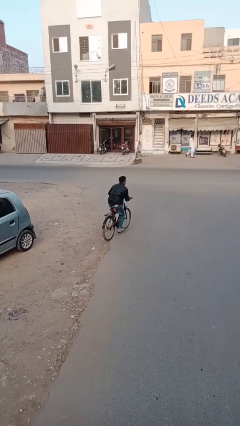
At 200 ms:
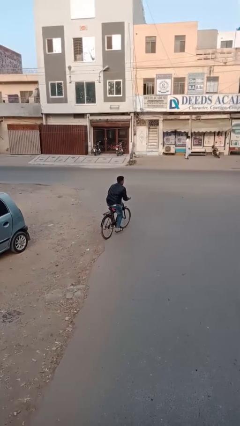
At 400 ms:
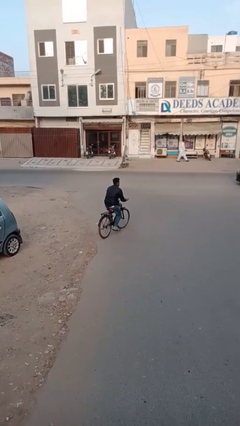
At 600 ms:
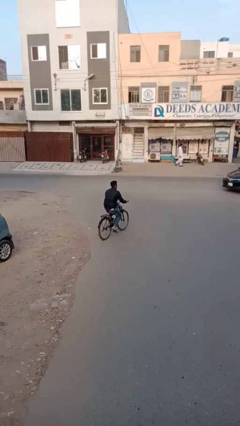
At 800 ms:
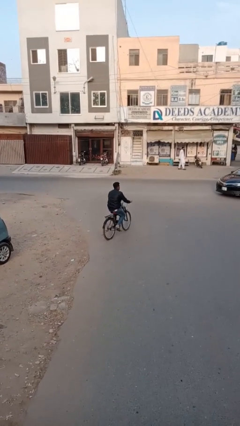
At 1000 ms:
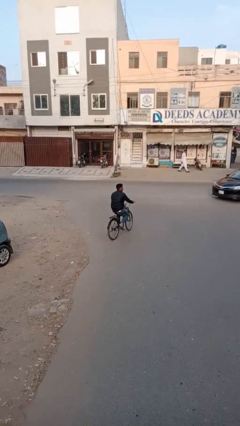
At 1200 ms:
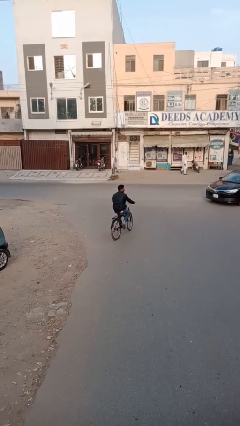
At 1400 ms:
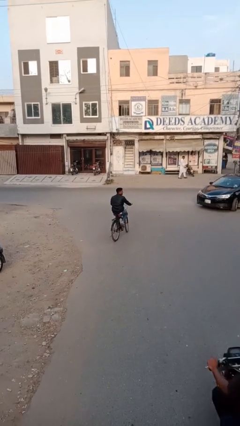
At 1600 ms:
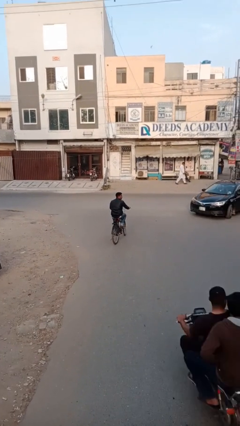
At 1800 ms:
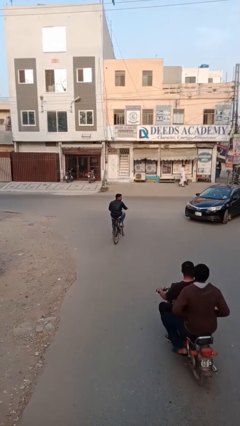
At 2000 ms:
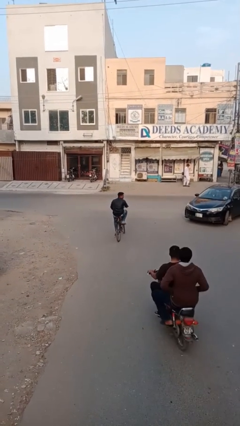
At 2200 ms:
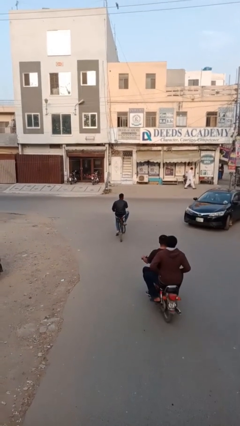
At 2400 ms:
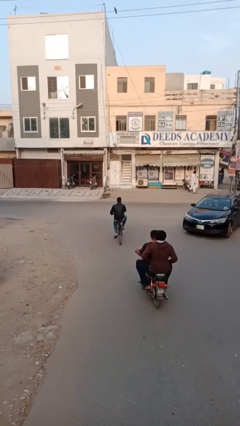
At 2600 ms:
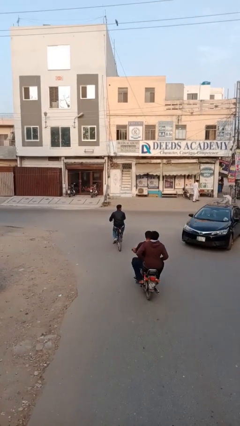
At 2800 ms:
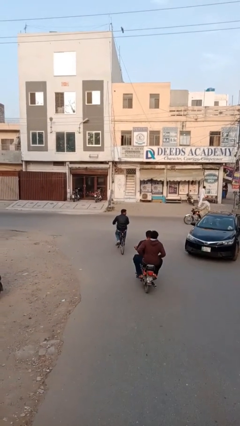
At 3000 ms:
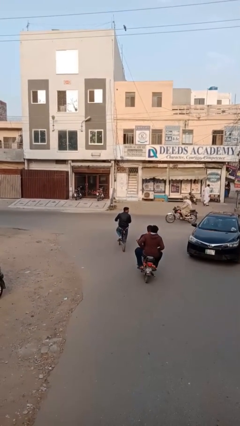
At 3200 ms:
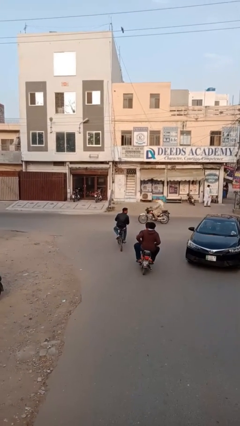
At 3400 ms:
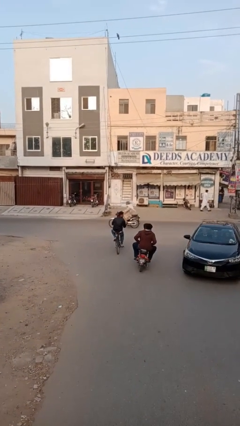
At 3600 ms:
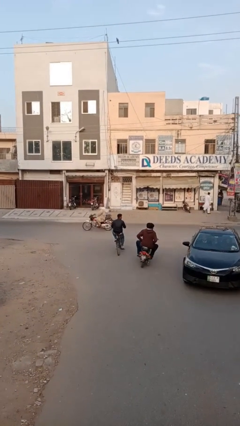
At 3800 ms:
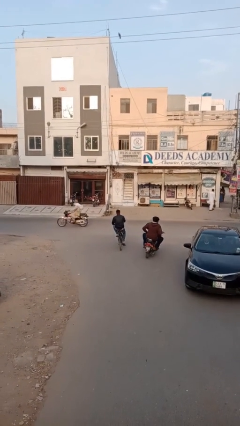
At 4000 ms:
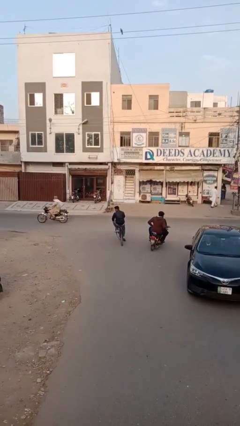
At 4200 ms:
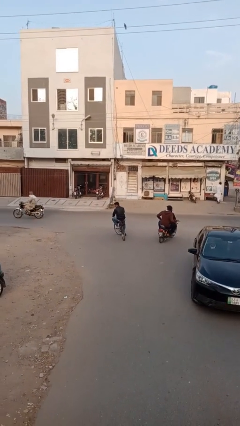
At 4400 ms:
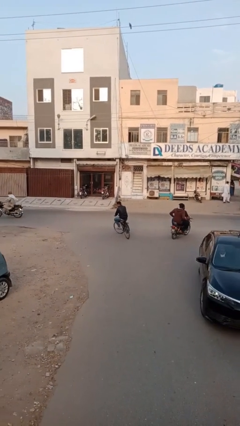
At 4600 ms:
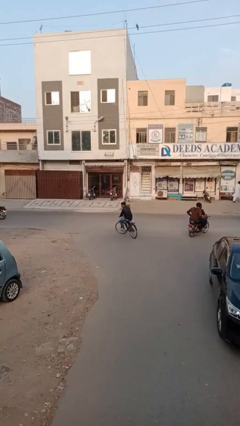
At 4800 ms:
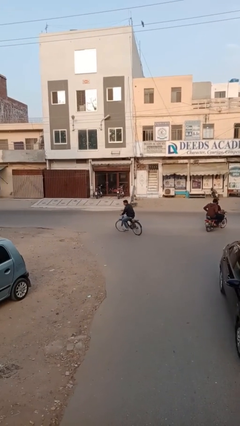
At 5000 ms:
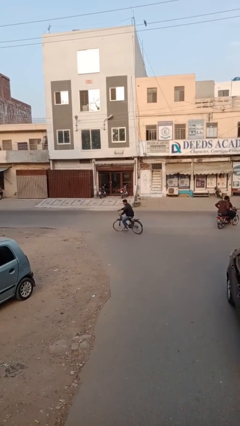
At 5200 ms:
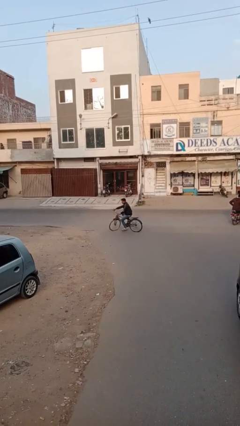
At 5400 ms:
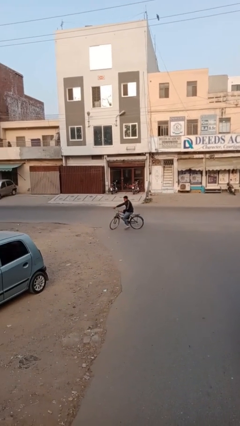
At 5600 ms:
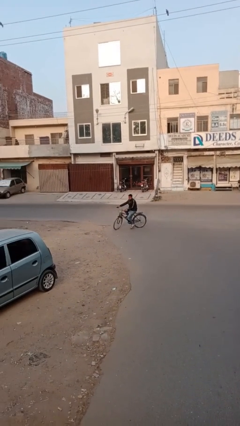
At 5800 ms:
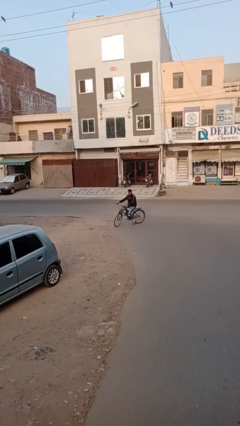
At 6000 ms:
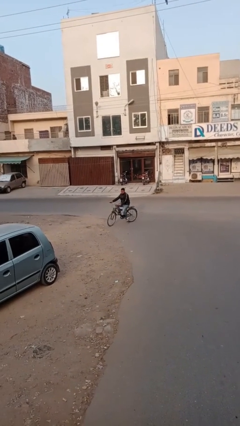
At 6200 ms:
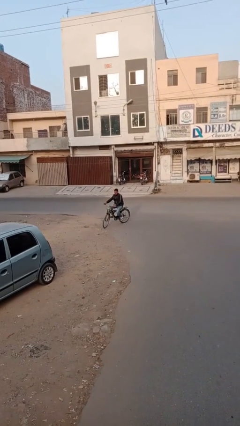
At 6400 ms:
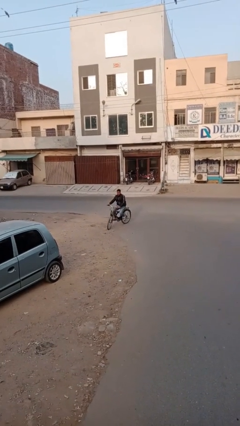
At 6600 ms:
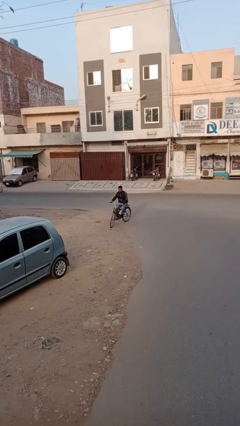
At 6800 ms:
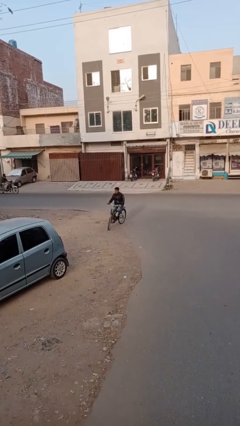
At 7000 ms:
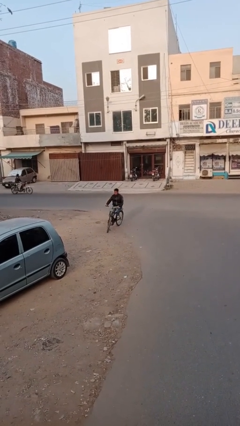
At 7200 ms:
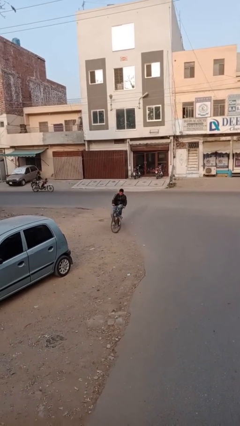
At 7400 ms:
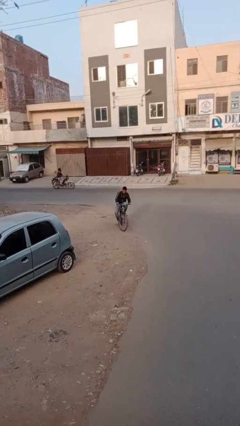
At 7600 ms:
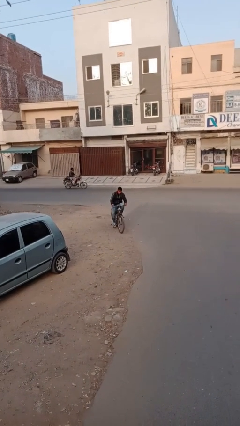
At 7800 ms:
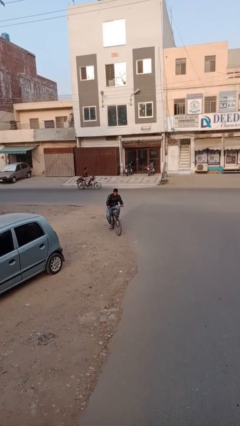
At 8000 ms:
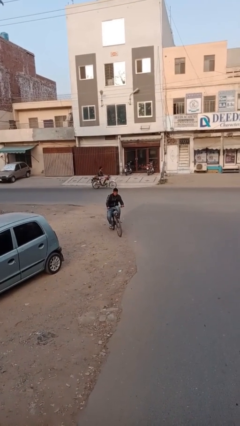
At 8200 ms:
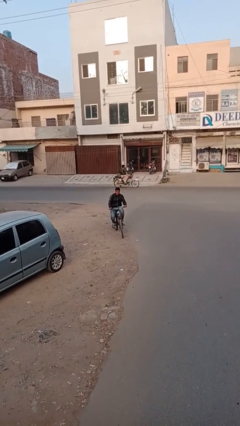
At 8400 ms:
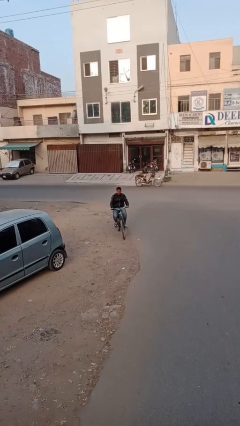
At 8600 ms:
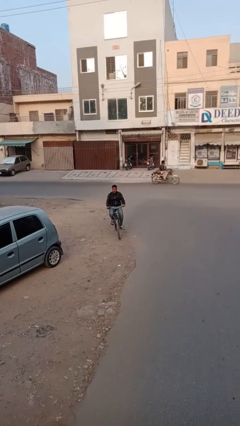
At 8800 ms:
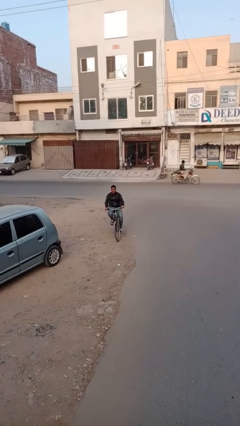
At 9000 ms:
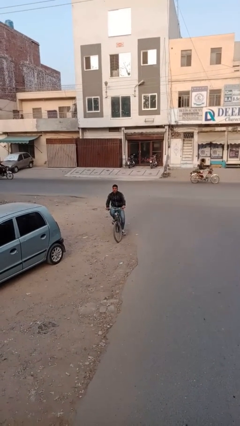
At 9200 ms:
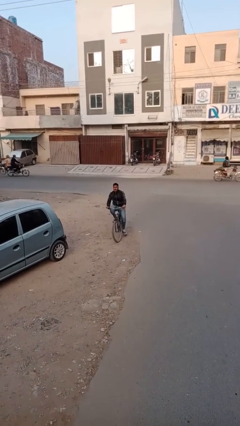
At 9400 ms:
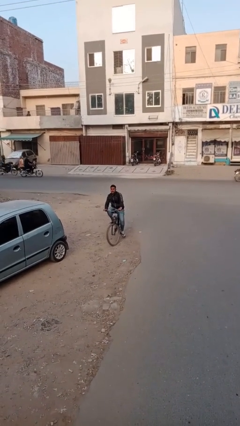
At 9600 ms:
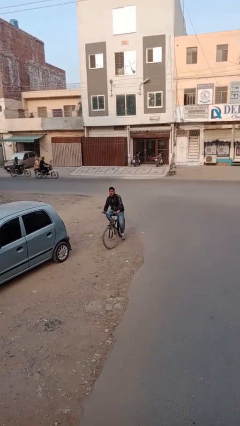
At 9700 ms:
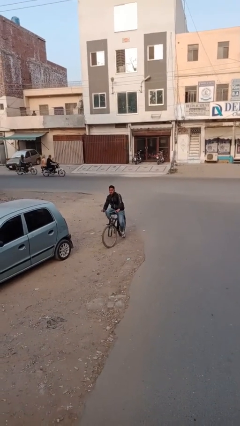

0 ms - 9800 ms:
person rides bicycle

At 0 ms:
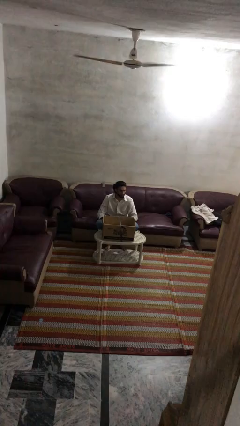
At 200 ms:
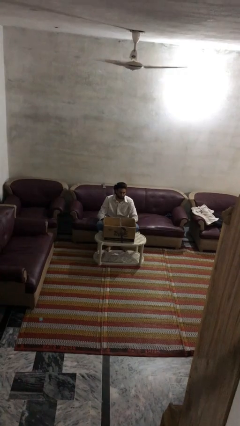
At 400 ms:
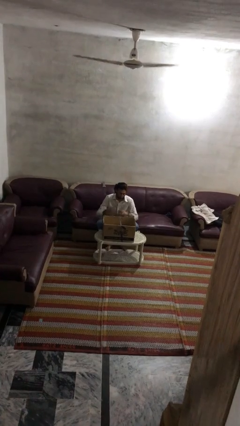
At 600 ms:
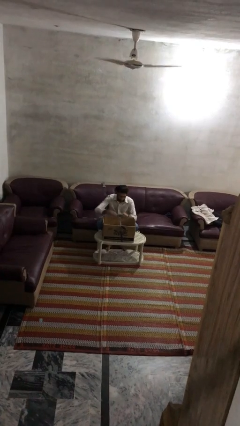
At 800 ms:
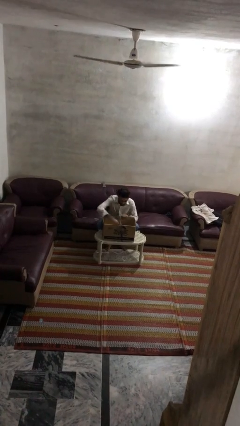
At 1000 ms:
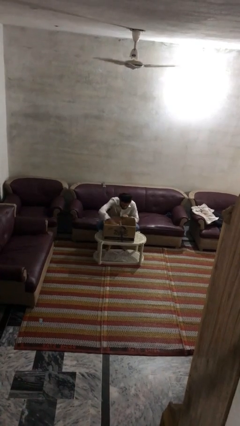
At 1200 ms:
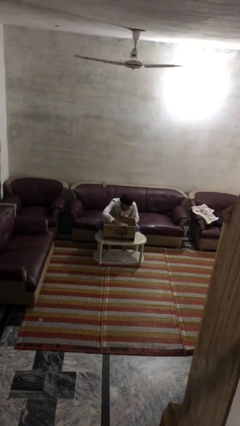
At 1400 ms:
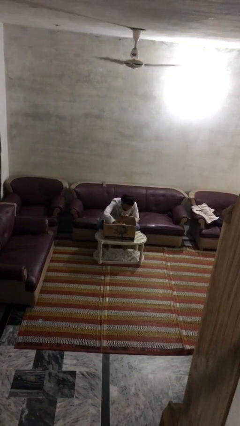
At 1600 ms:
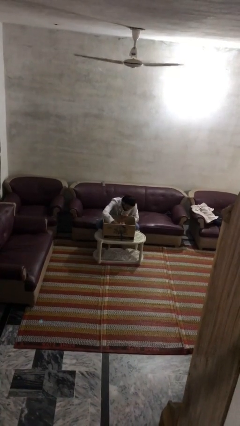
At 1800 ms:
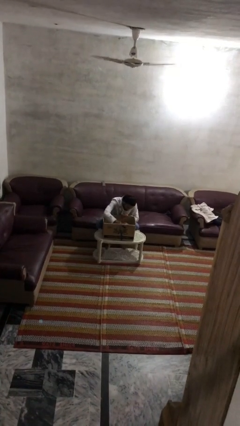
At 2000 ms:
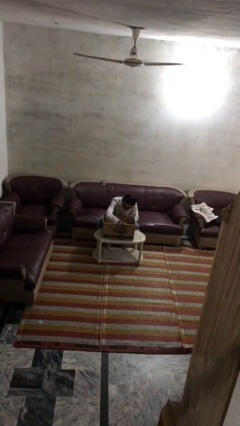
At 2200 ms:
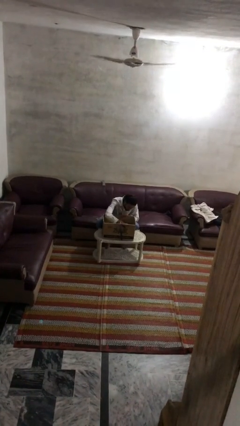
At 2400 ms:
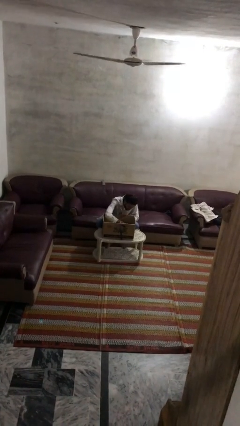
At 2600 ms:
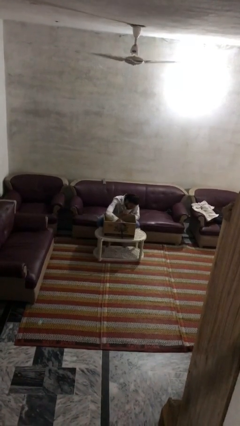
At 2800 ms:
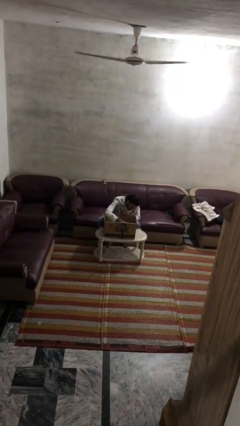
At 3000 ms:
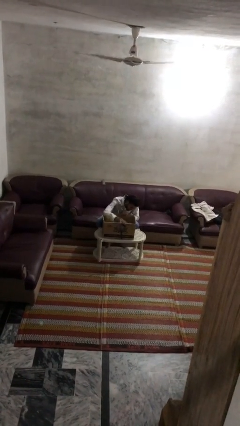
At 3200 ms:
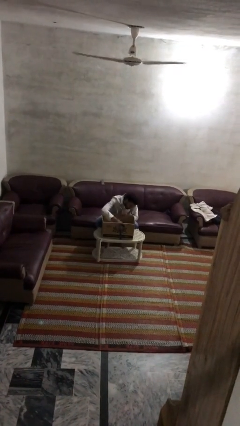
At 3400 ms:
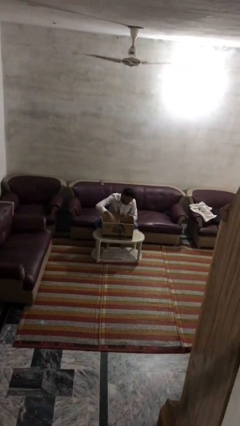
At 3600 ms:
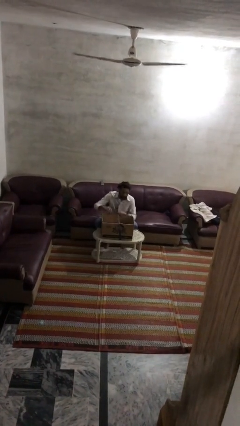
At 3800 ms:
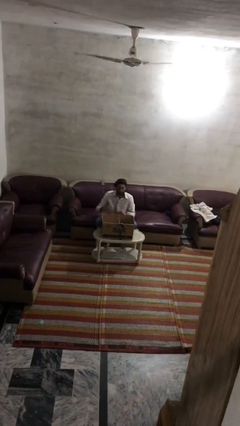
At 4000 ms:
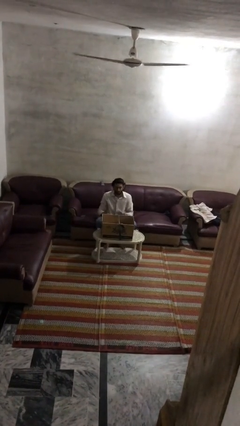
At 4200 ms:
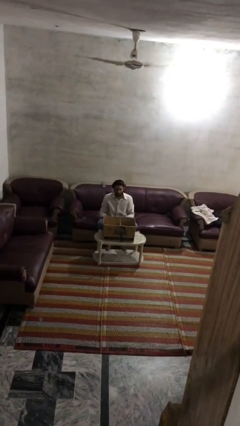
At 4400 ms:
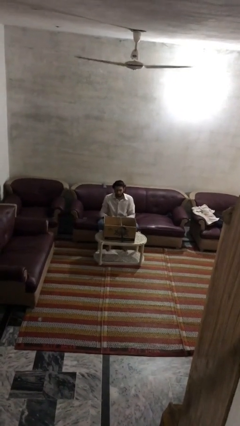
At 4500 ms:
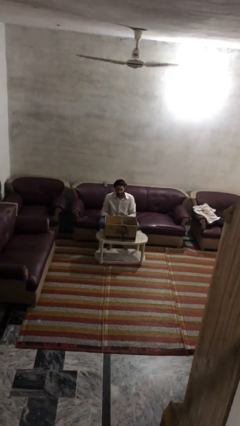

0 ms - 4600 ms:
person searches in box

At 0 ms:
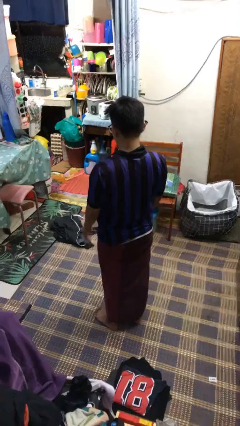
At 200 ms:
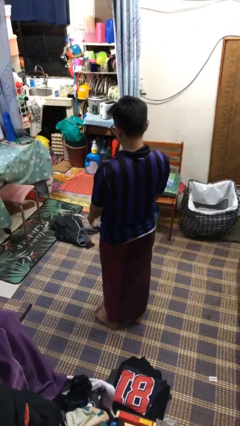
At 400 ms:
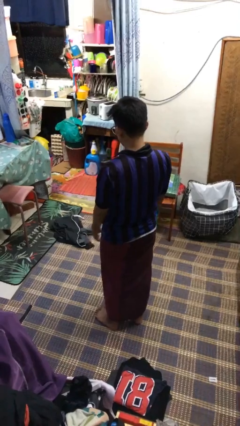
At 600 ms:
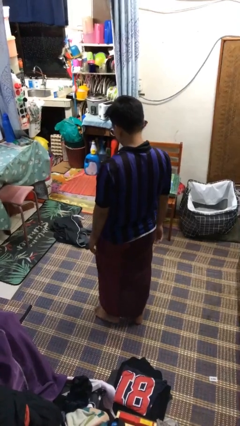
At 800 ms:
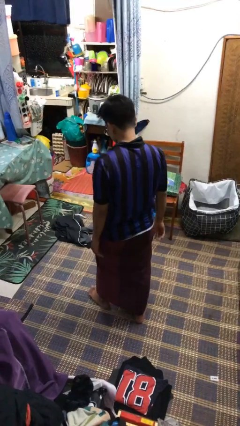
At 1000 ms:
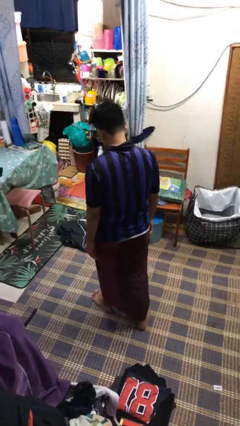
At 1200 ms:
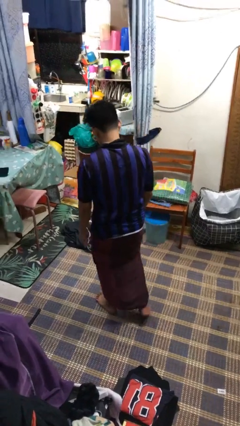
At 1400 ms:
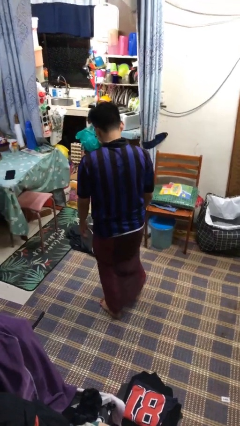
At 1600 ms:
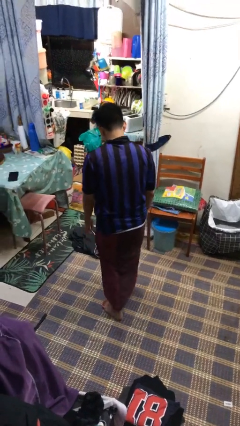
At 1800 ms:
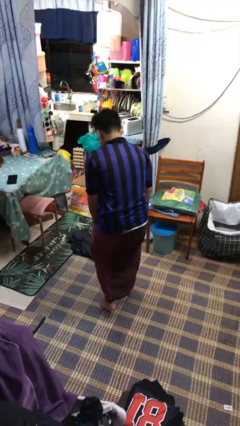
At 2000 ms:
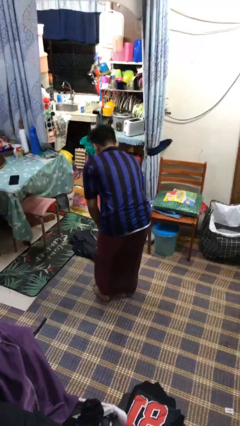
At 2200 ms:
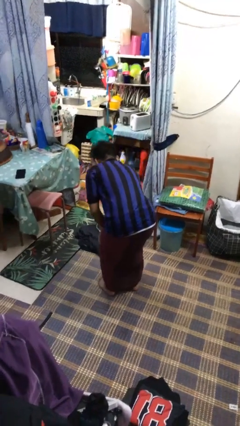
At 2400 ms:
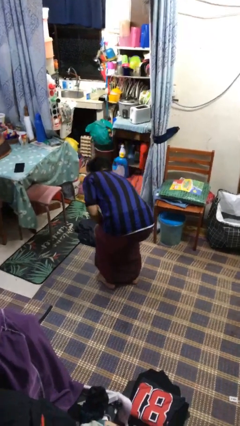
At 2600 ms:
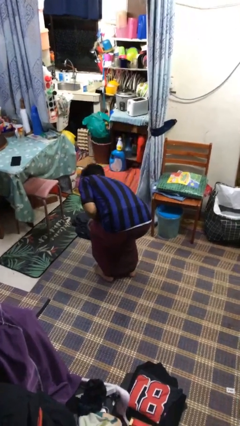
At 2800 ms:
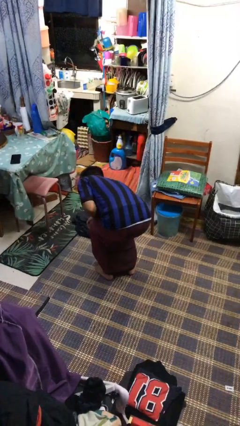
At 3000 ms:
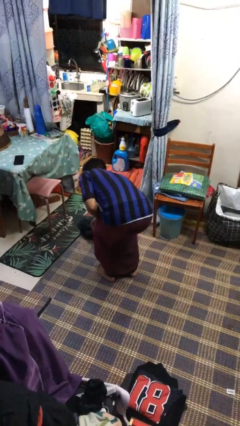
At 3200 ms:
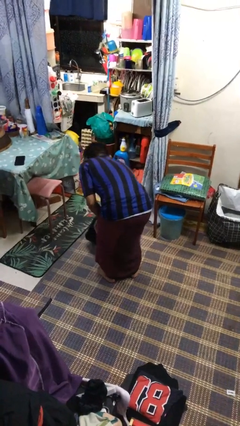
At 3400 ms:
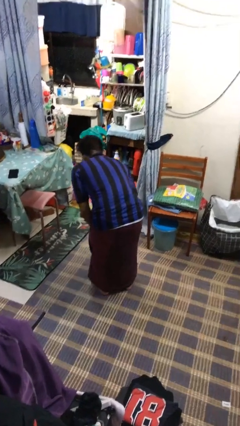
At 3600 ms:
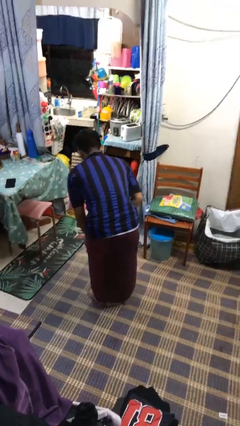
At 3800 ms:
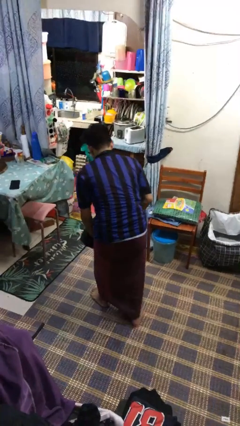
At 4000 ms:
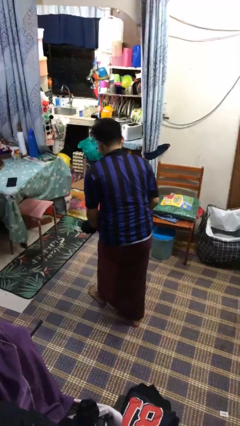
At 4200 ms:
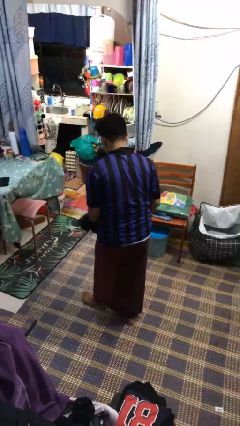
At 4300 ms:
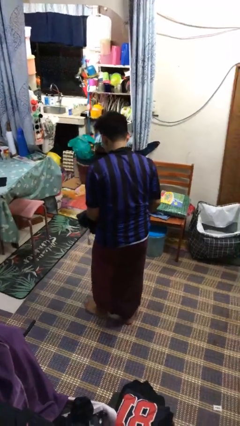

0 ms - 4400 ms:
person picks up object from floor
